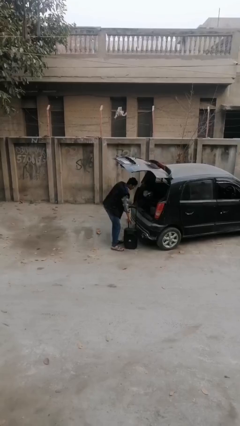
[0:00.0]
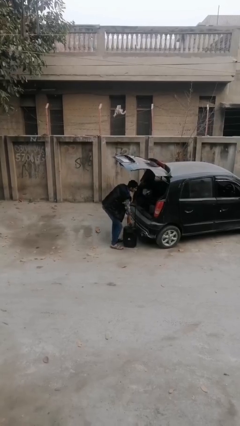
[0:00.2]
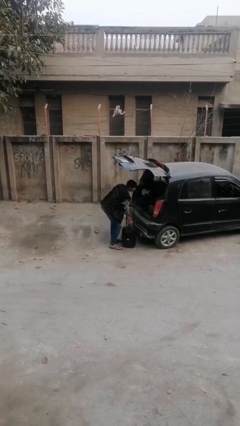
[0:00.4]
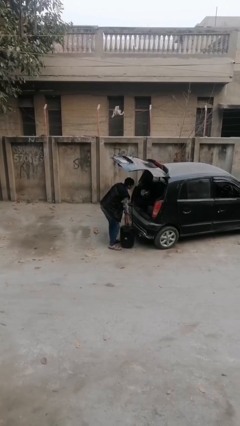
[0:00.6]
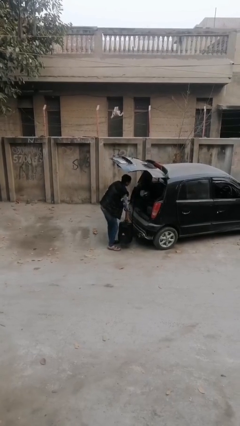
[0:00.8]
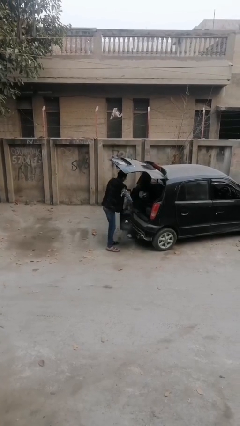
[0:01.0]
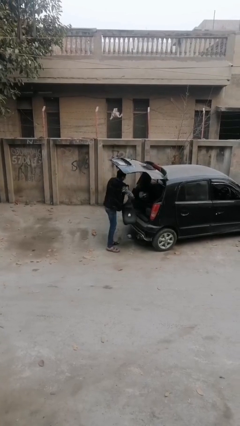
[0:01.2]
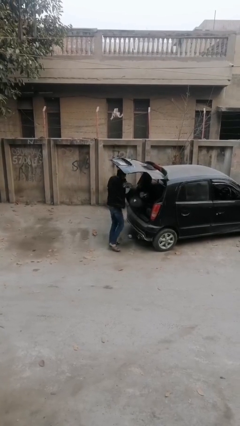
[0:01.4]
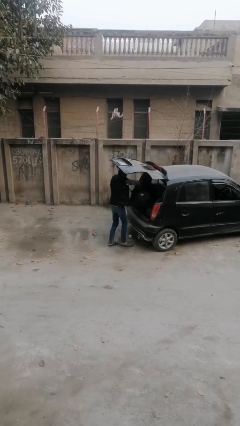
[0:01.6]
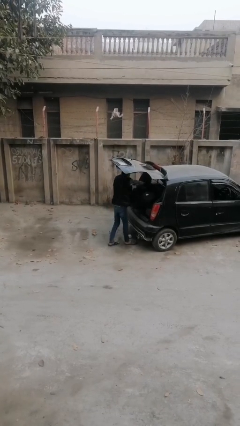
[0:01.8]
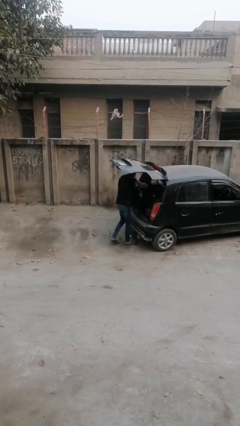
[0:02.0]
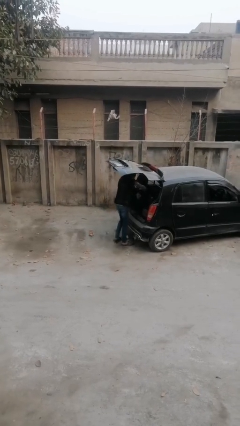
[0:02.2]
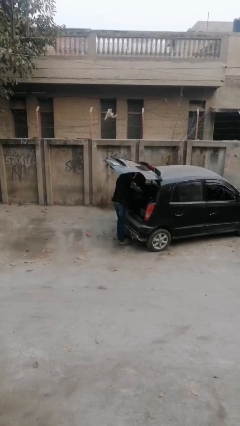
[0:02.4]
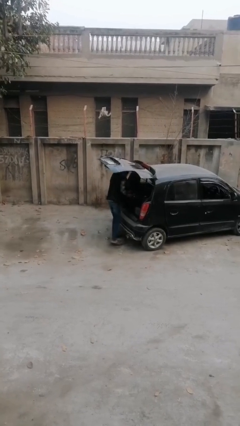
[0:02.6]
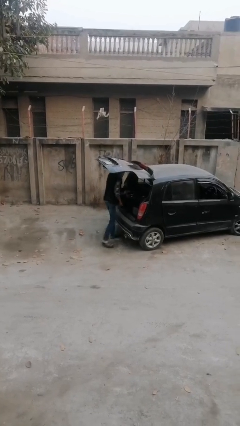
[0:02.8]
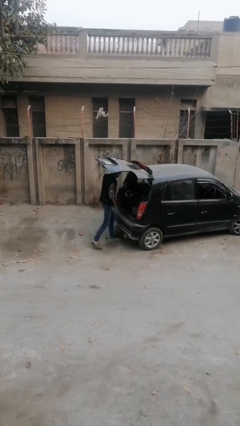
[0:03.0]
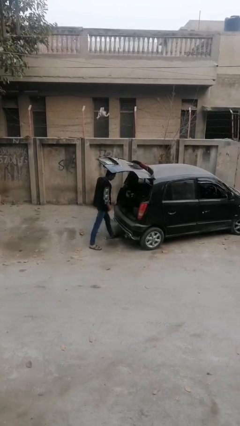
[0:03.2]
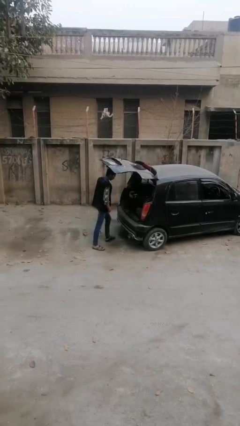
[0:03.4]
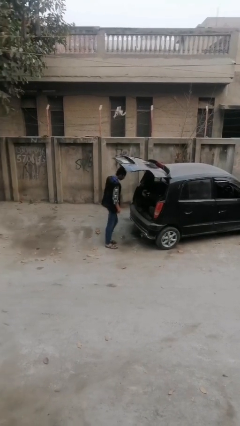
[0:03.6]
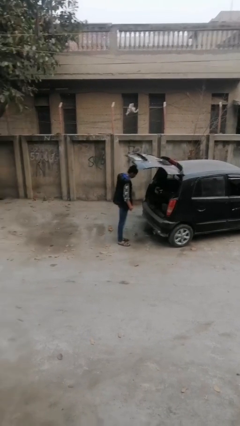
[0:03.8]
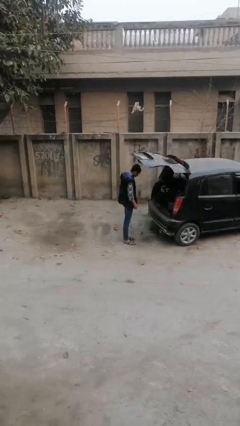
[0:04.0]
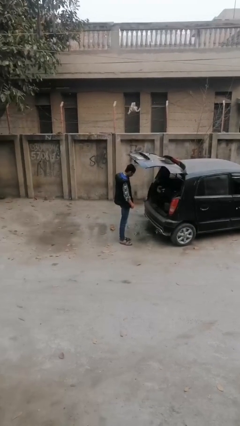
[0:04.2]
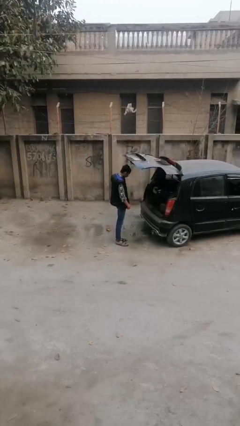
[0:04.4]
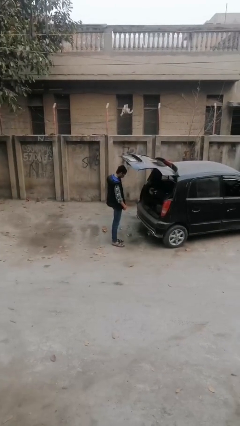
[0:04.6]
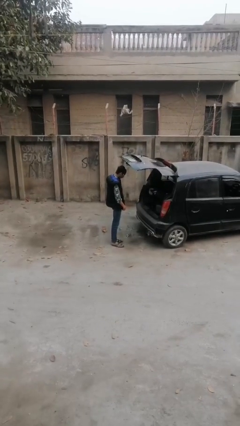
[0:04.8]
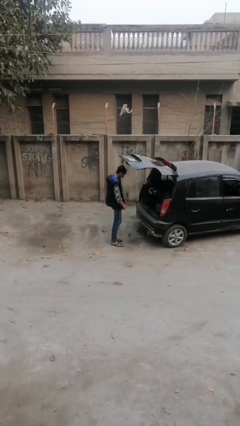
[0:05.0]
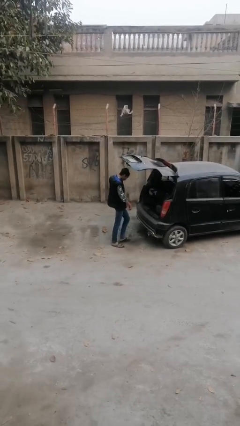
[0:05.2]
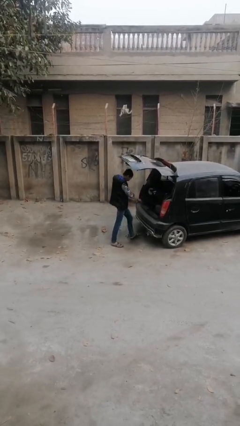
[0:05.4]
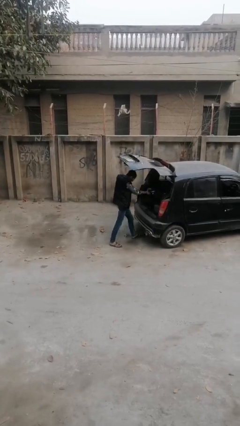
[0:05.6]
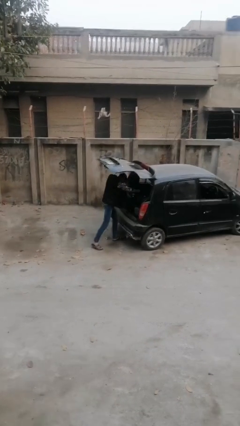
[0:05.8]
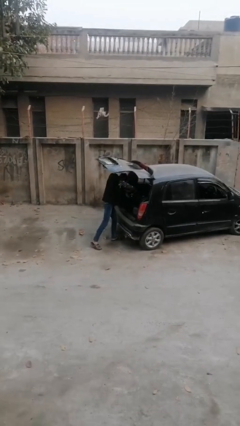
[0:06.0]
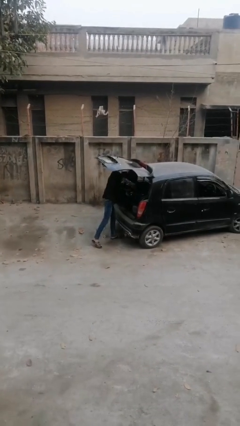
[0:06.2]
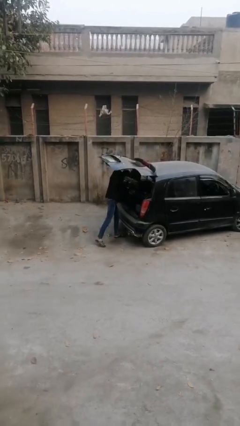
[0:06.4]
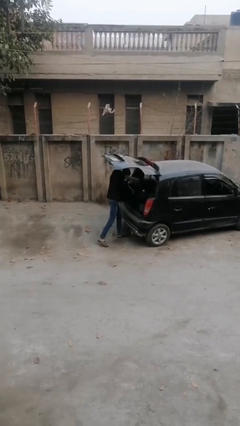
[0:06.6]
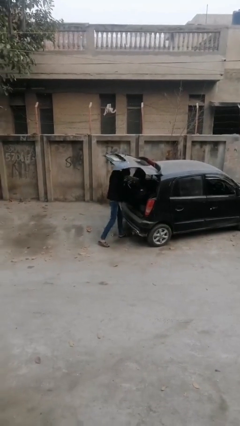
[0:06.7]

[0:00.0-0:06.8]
person loads car

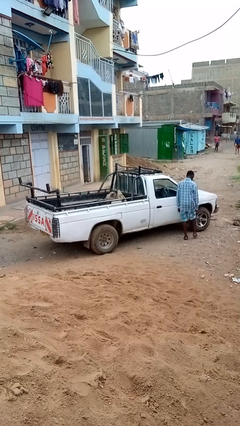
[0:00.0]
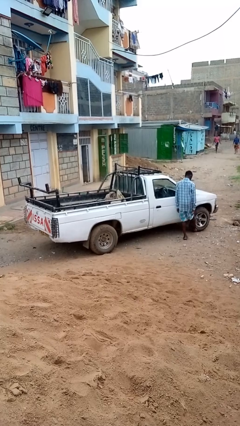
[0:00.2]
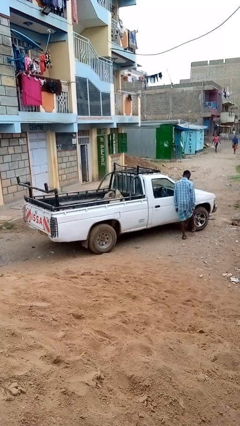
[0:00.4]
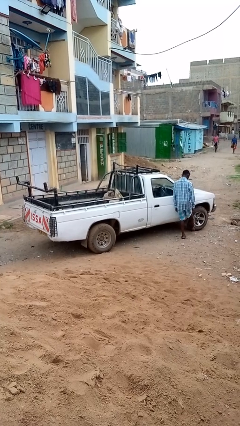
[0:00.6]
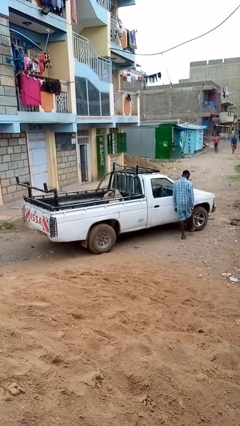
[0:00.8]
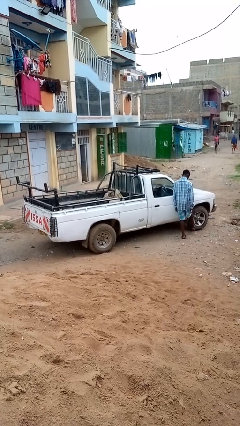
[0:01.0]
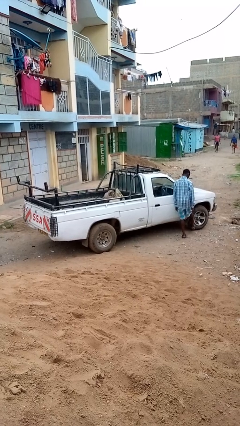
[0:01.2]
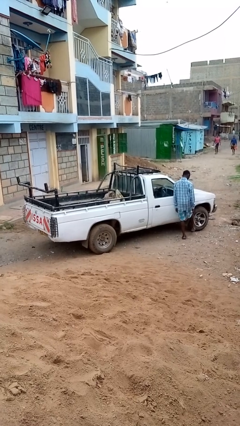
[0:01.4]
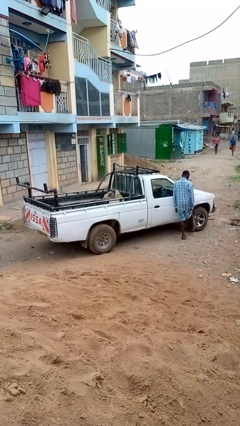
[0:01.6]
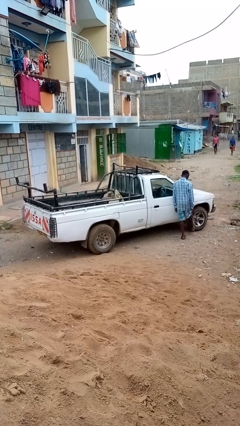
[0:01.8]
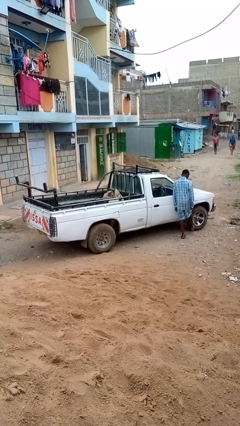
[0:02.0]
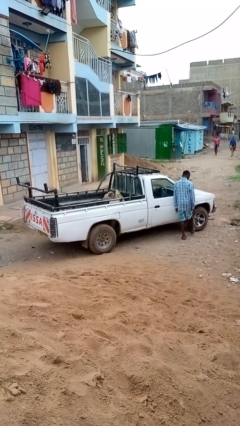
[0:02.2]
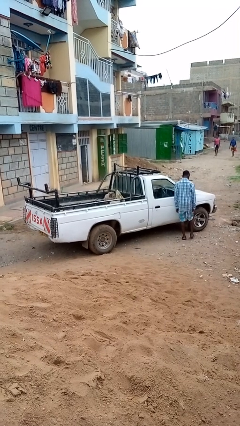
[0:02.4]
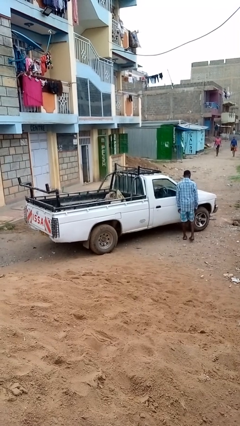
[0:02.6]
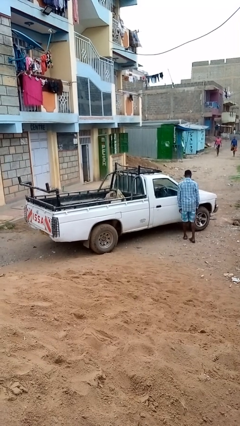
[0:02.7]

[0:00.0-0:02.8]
person kicks car tires

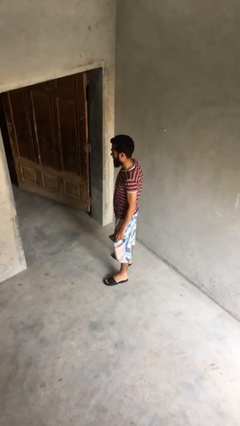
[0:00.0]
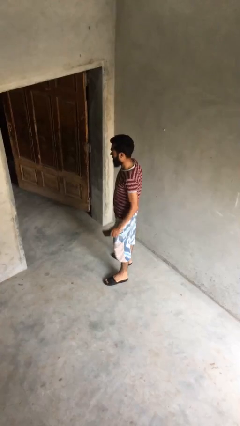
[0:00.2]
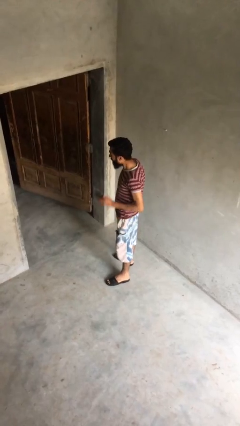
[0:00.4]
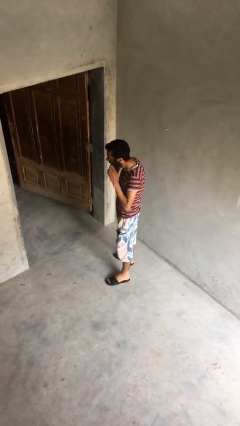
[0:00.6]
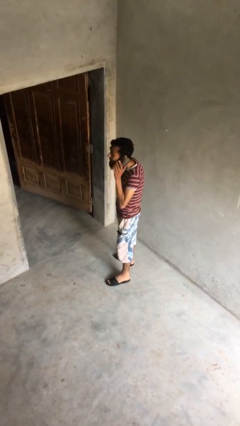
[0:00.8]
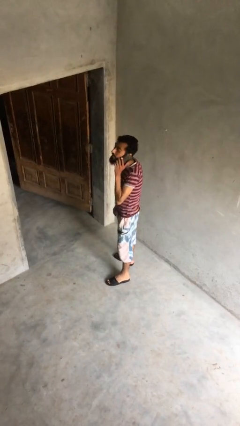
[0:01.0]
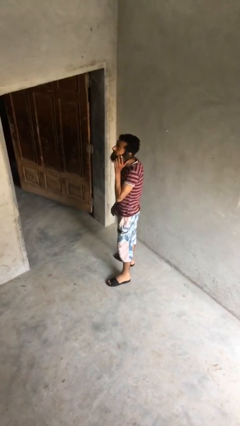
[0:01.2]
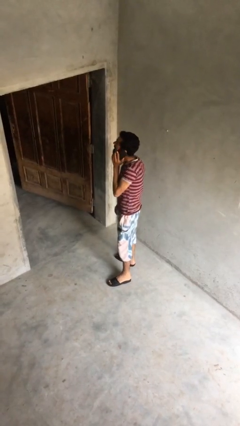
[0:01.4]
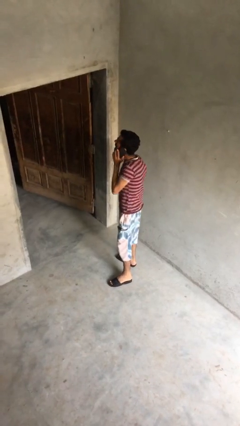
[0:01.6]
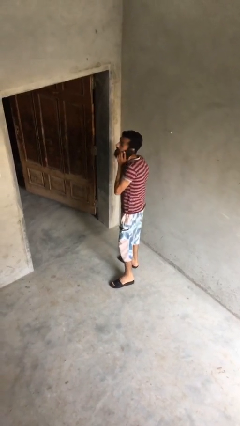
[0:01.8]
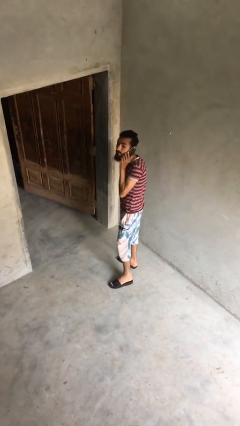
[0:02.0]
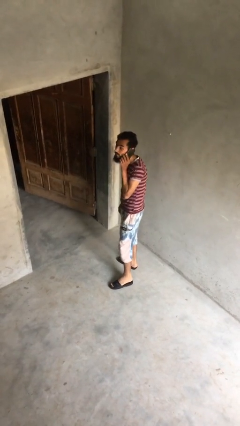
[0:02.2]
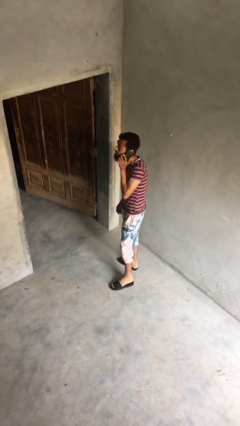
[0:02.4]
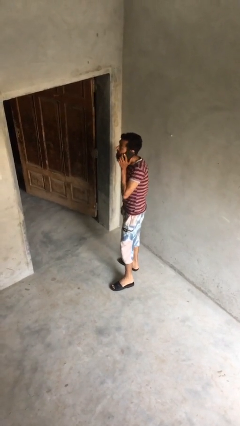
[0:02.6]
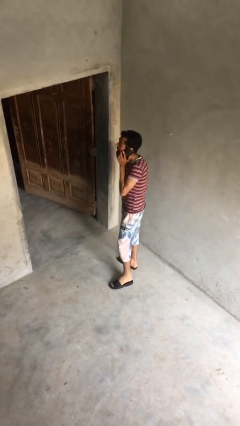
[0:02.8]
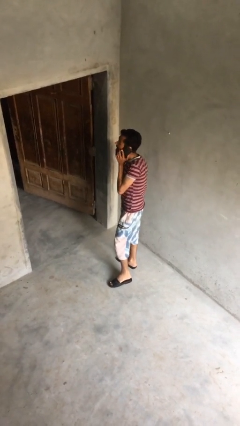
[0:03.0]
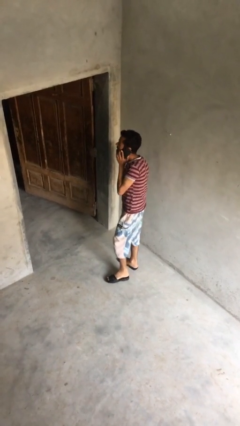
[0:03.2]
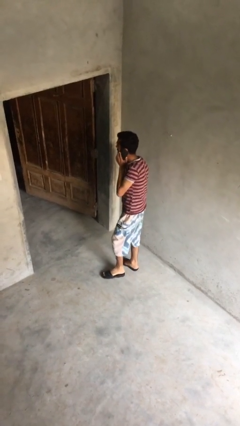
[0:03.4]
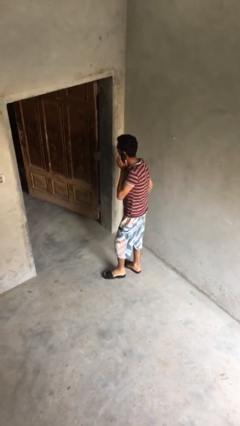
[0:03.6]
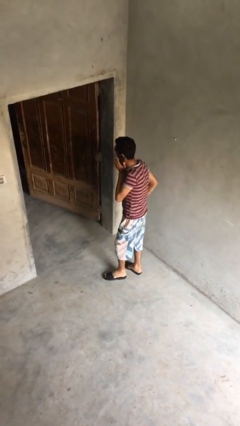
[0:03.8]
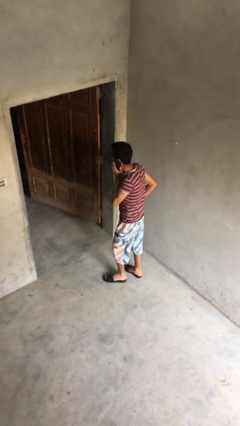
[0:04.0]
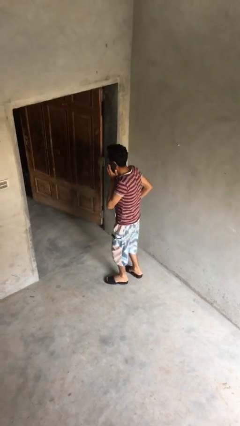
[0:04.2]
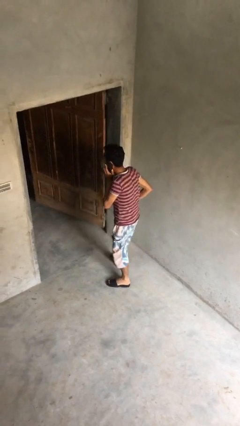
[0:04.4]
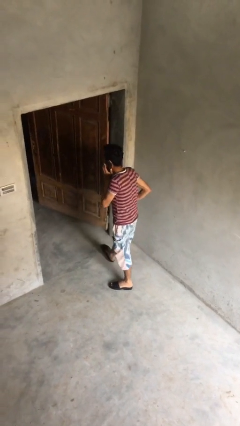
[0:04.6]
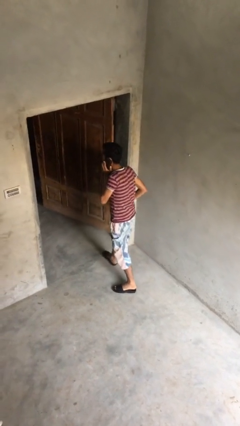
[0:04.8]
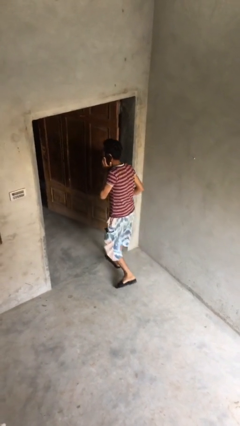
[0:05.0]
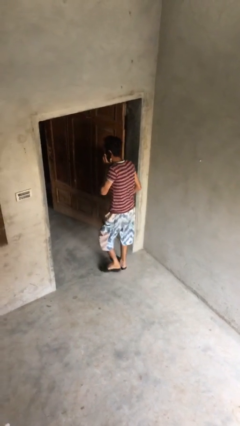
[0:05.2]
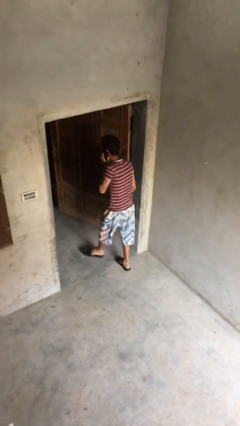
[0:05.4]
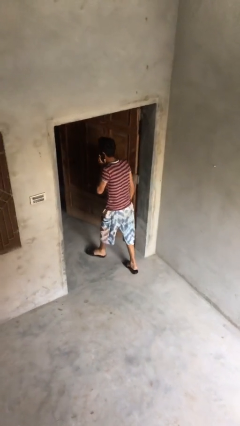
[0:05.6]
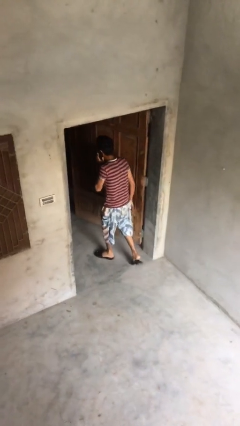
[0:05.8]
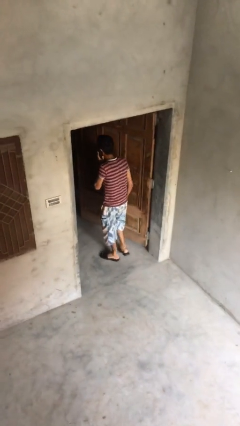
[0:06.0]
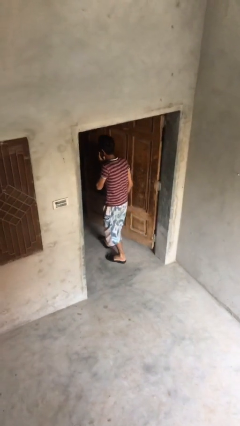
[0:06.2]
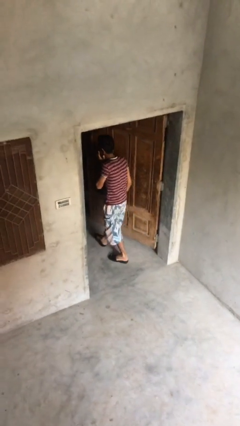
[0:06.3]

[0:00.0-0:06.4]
person exits scene through structure

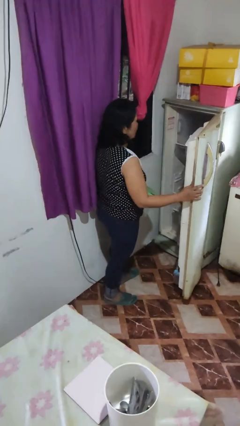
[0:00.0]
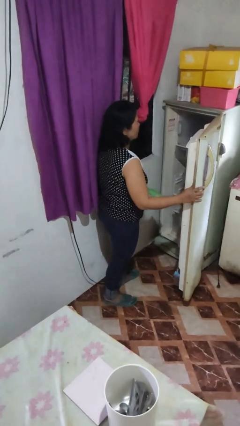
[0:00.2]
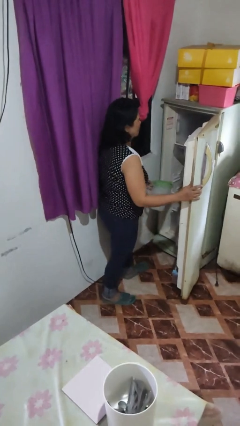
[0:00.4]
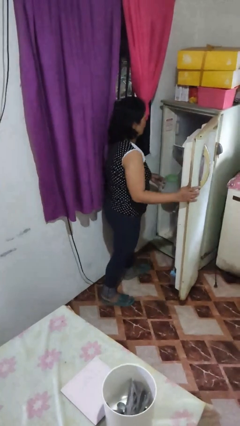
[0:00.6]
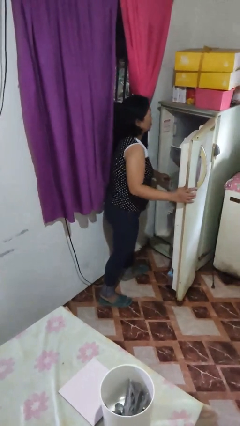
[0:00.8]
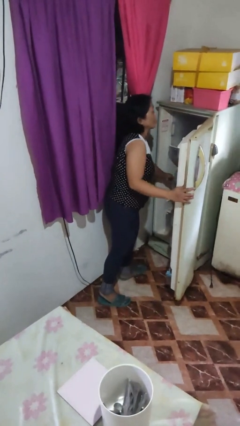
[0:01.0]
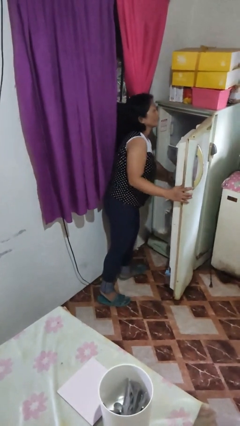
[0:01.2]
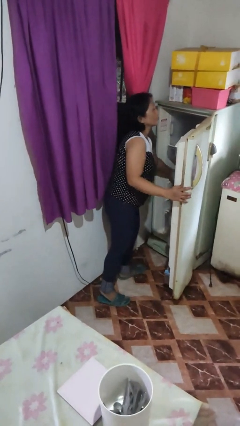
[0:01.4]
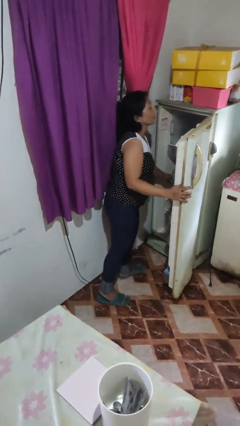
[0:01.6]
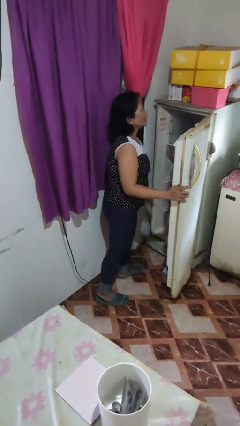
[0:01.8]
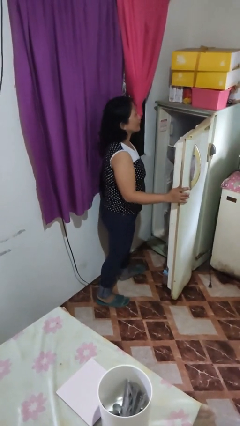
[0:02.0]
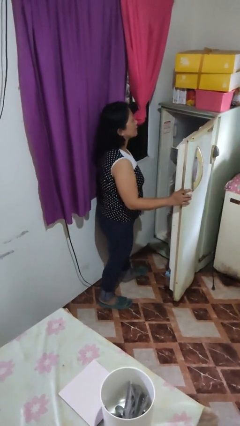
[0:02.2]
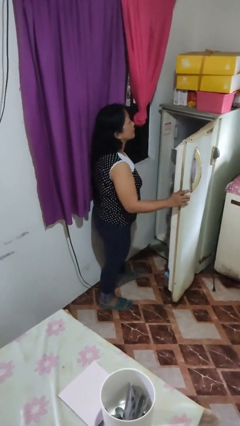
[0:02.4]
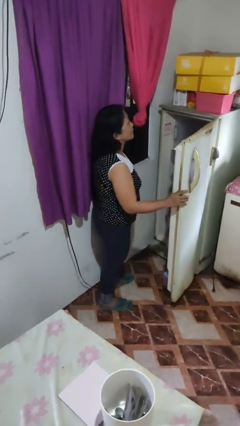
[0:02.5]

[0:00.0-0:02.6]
person puts object into refrigerator
